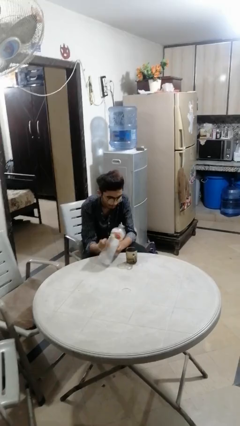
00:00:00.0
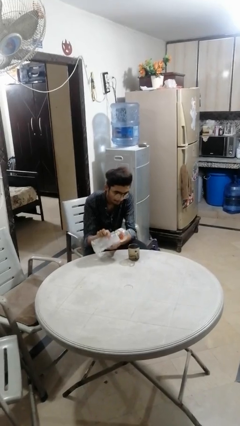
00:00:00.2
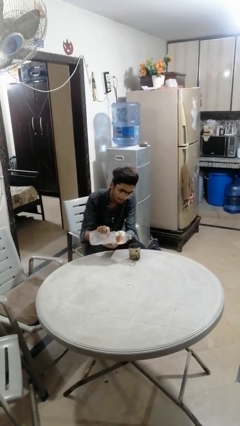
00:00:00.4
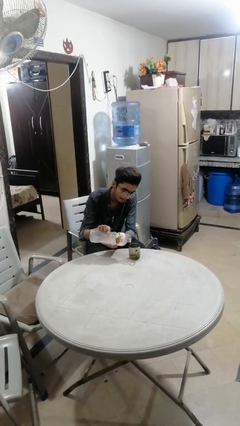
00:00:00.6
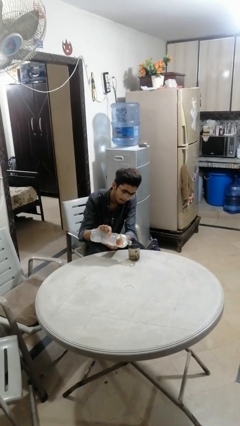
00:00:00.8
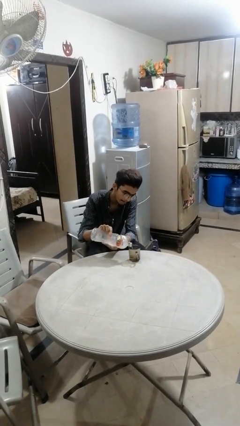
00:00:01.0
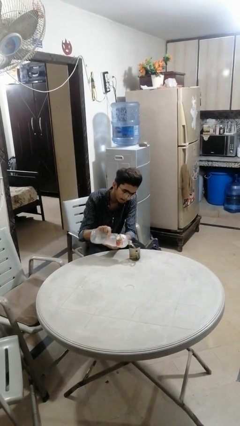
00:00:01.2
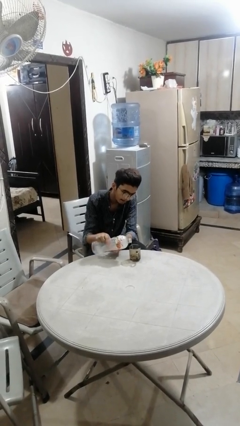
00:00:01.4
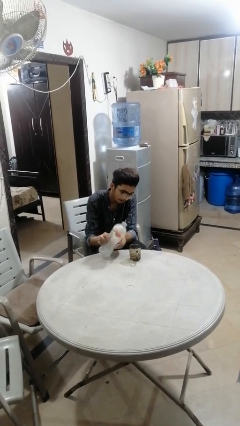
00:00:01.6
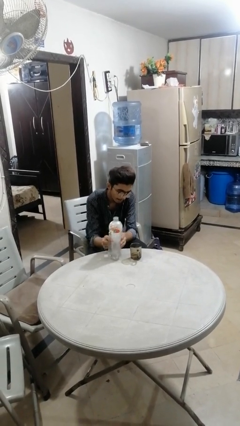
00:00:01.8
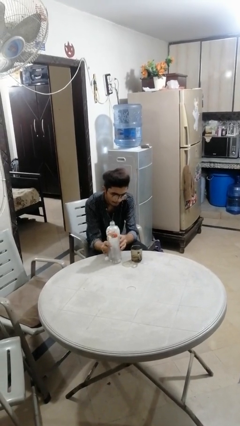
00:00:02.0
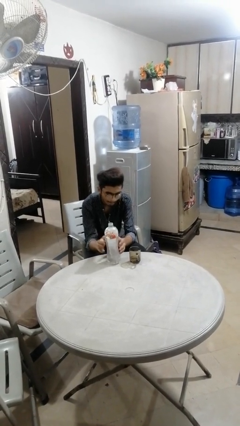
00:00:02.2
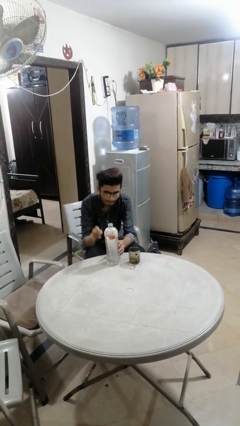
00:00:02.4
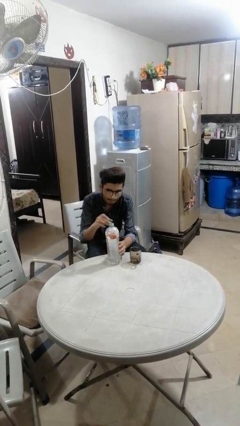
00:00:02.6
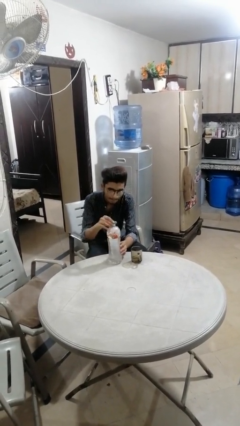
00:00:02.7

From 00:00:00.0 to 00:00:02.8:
person pours liquid into cup

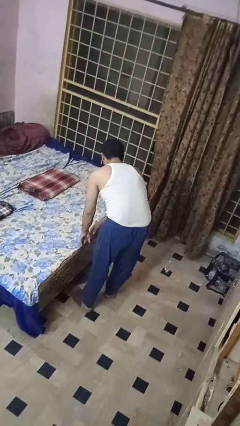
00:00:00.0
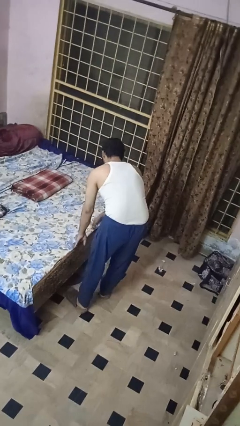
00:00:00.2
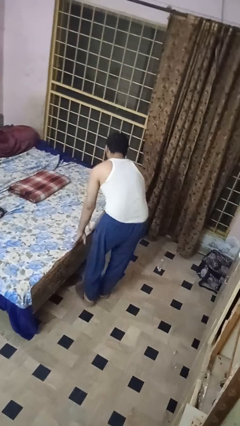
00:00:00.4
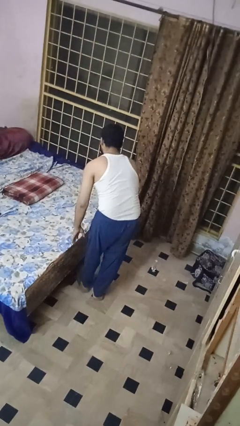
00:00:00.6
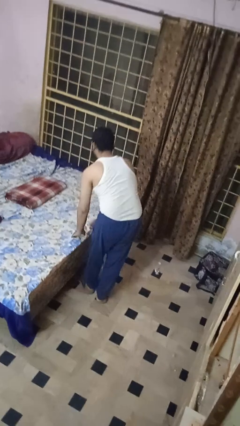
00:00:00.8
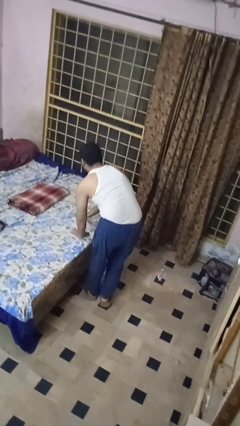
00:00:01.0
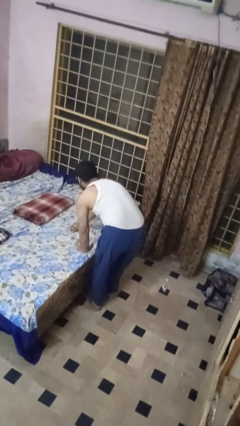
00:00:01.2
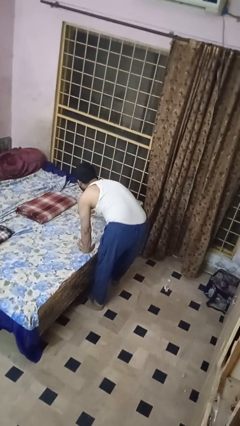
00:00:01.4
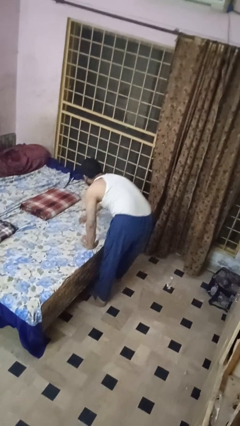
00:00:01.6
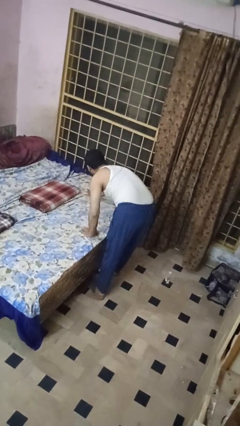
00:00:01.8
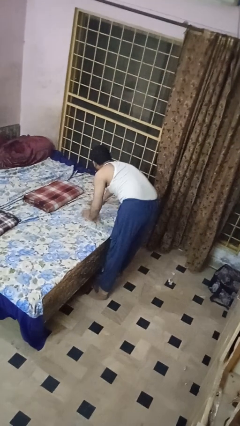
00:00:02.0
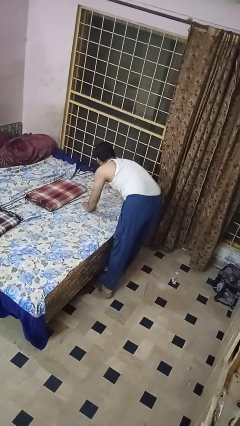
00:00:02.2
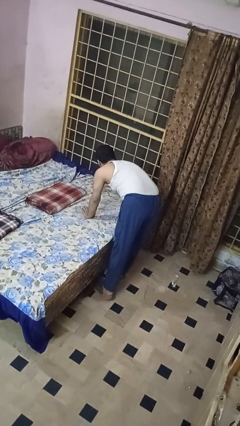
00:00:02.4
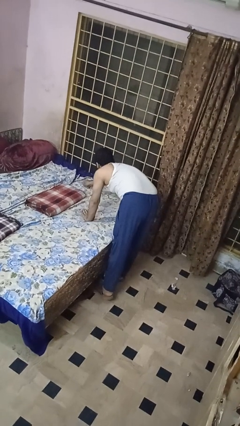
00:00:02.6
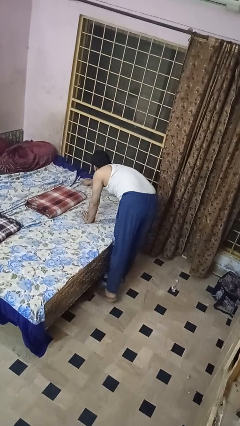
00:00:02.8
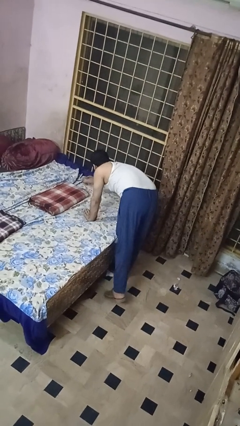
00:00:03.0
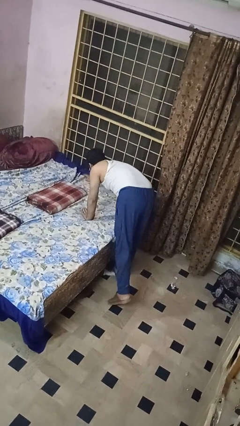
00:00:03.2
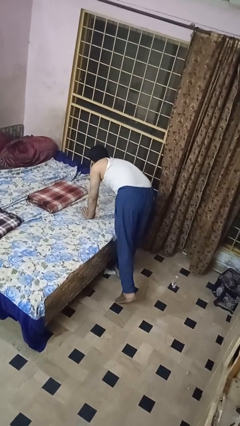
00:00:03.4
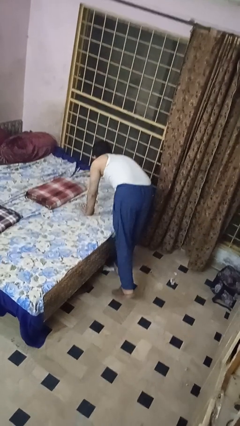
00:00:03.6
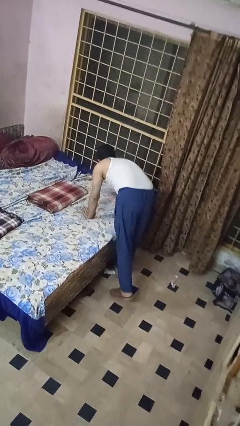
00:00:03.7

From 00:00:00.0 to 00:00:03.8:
person makes bed

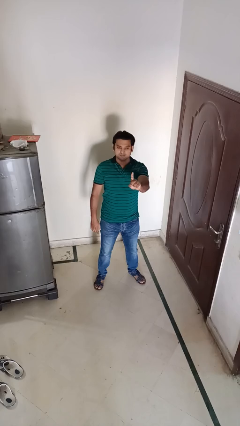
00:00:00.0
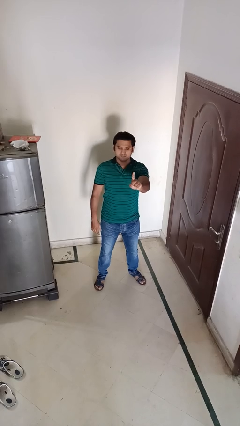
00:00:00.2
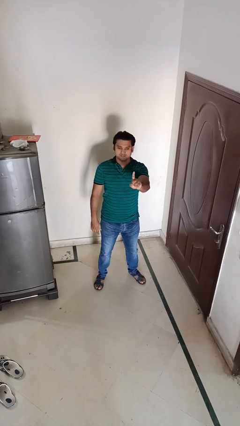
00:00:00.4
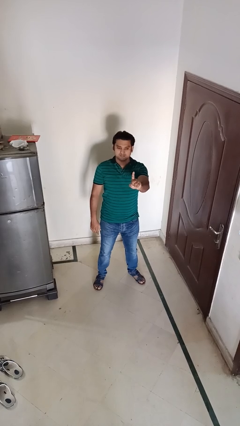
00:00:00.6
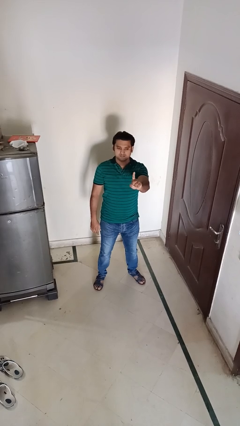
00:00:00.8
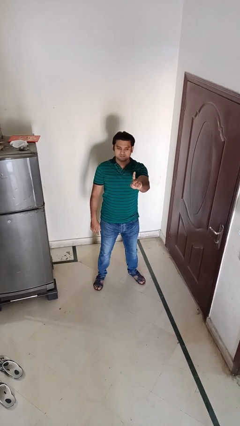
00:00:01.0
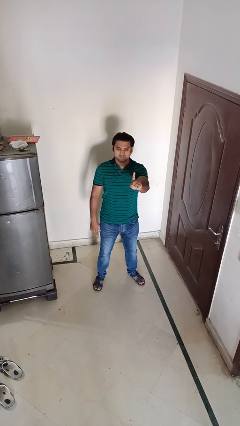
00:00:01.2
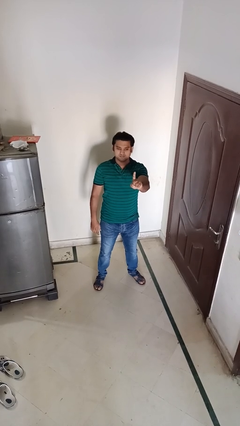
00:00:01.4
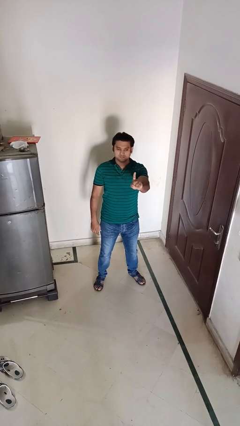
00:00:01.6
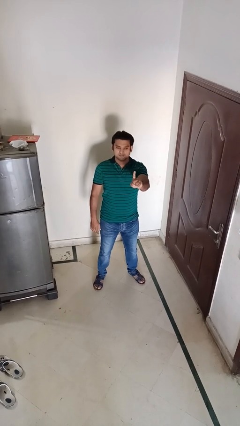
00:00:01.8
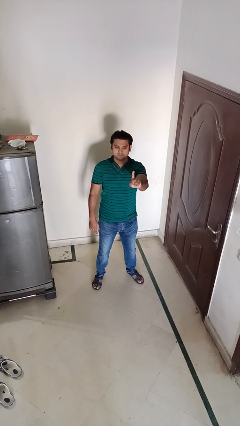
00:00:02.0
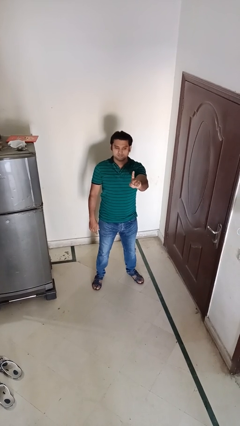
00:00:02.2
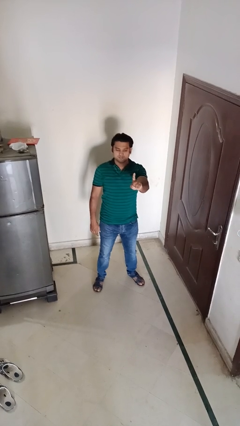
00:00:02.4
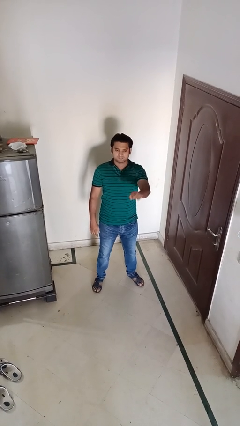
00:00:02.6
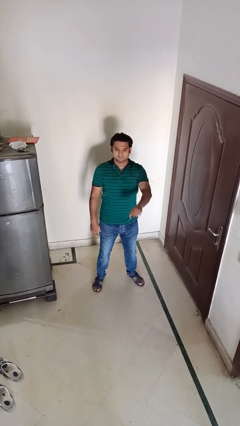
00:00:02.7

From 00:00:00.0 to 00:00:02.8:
person gestures number one

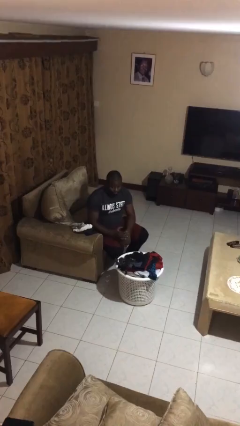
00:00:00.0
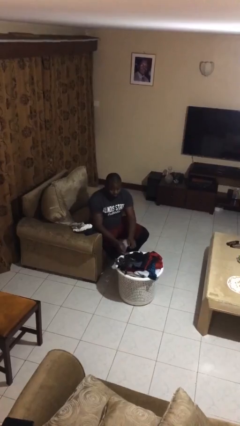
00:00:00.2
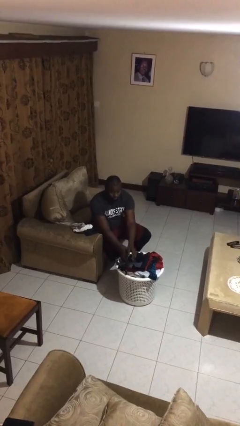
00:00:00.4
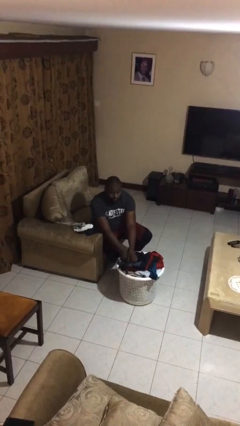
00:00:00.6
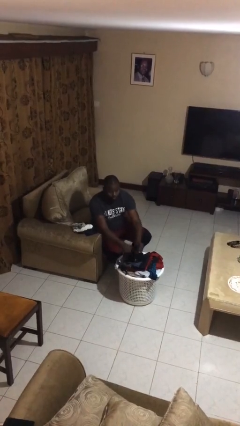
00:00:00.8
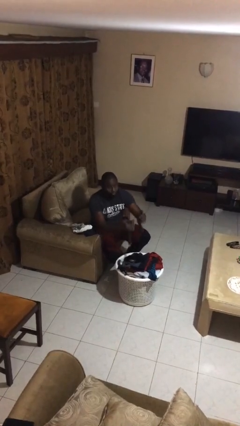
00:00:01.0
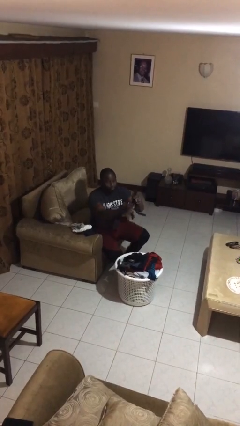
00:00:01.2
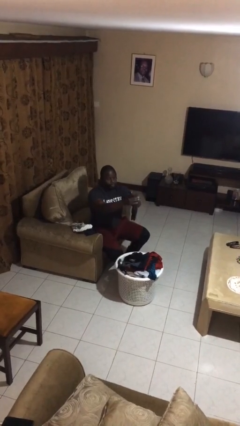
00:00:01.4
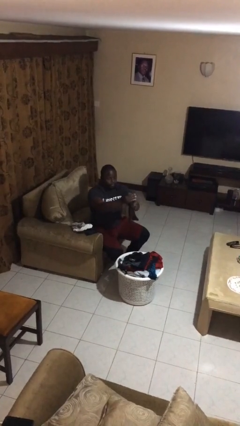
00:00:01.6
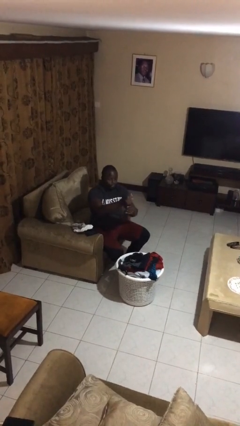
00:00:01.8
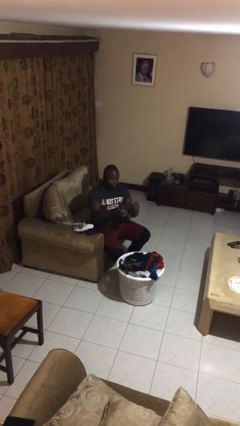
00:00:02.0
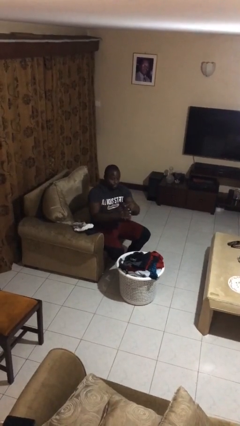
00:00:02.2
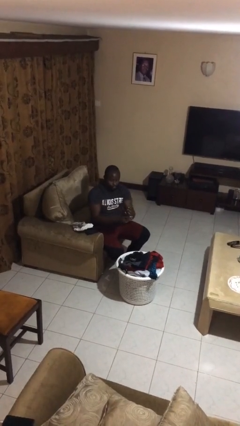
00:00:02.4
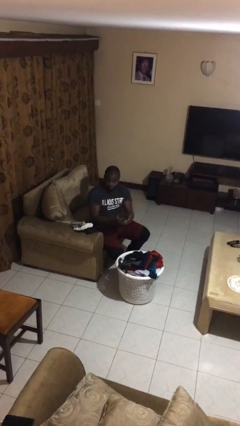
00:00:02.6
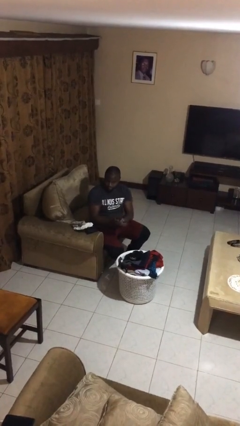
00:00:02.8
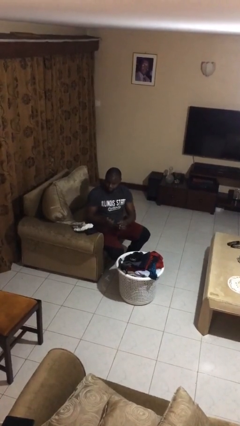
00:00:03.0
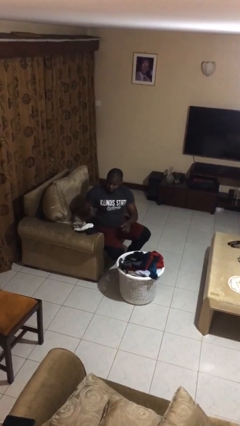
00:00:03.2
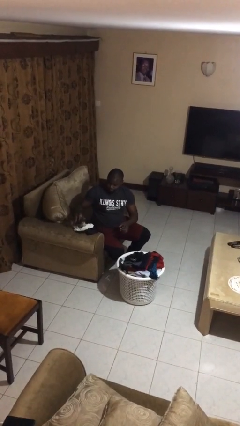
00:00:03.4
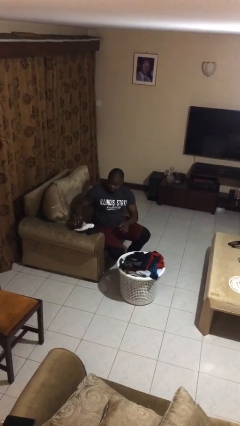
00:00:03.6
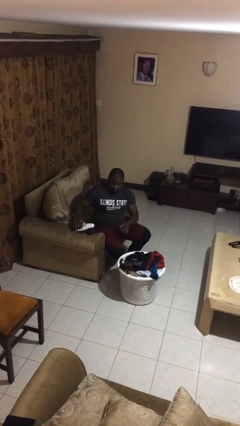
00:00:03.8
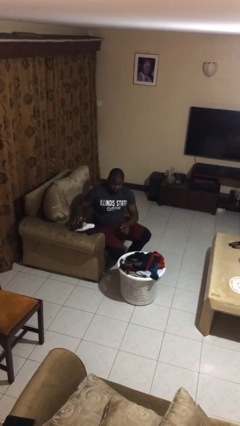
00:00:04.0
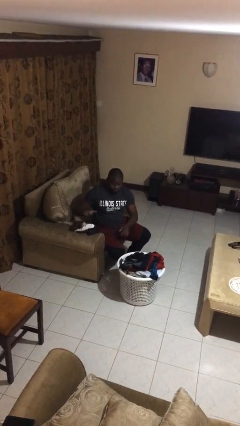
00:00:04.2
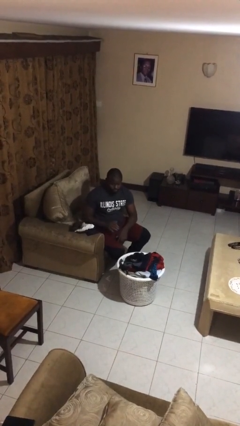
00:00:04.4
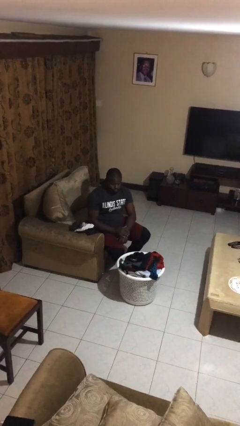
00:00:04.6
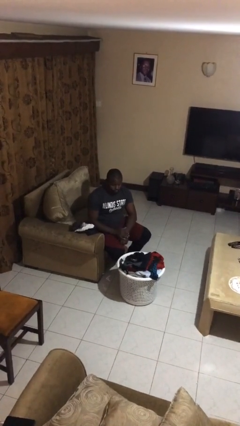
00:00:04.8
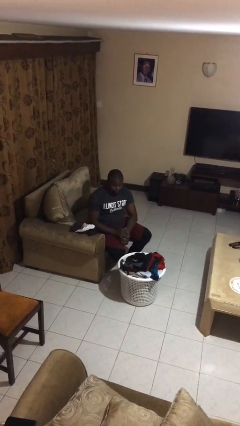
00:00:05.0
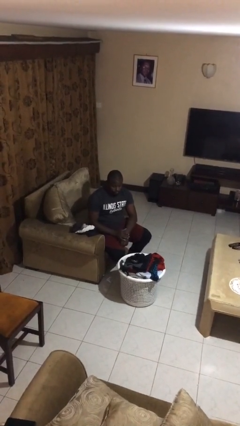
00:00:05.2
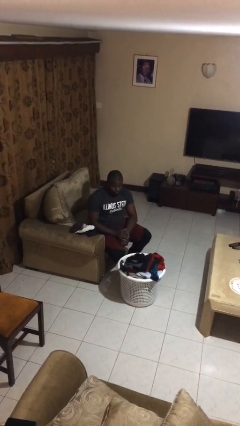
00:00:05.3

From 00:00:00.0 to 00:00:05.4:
person folds socks

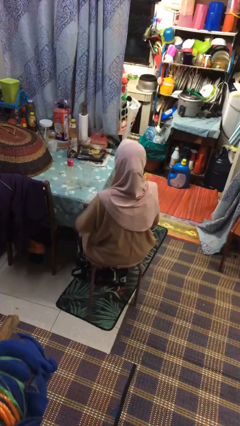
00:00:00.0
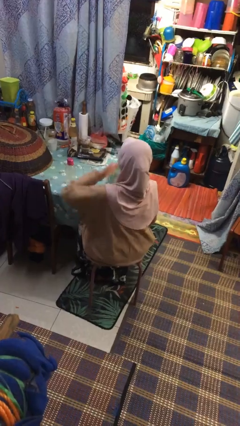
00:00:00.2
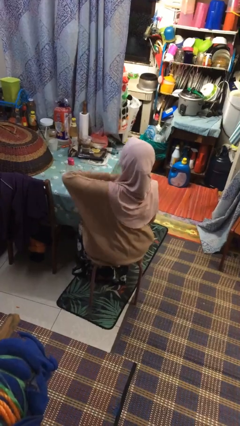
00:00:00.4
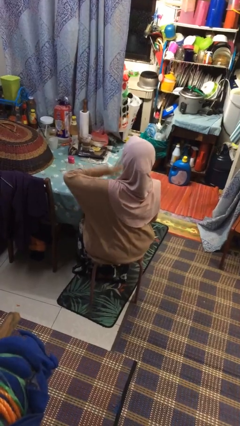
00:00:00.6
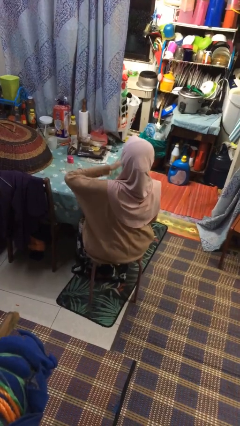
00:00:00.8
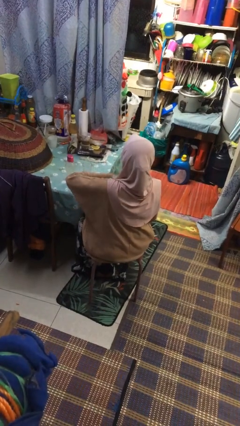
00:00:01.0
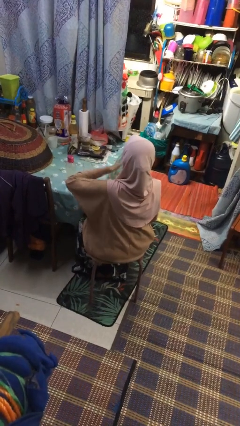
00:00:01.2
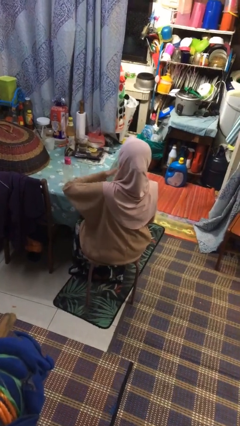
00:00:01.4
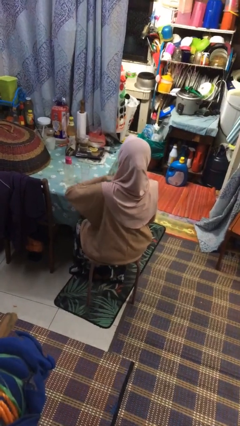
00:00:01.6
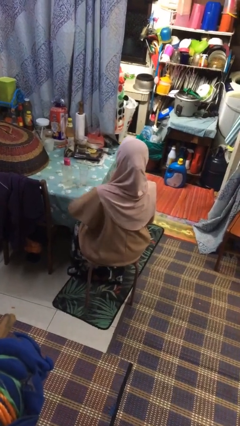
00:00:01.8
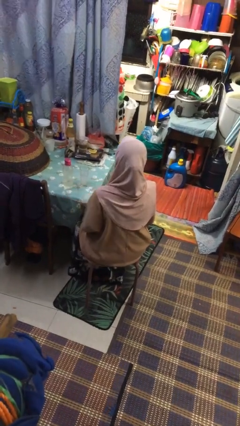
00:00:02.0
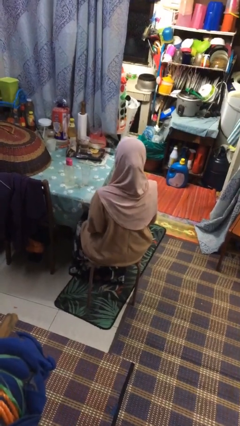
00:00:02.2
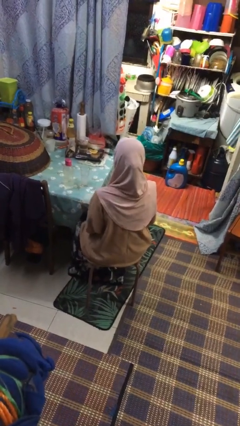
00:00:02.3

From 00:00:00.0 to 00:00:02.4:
person drums on chest
